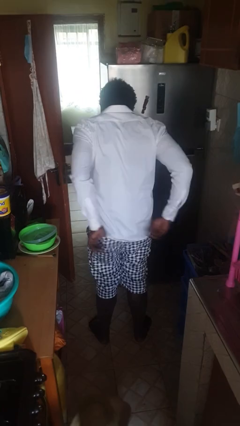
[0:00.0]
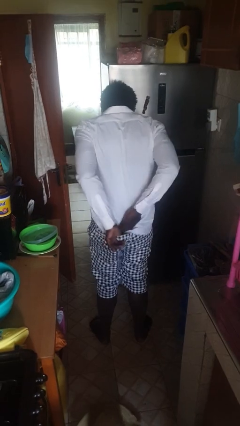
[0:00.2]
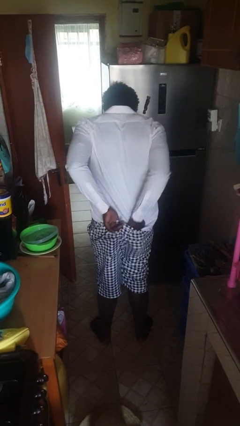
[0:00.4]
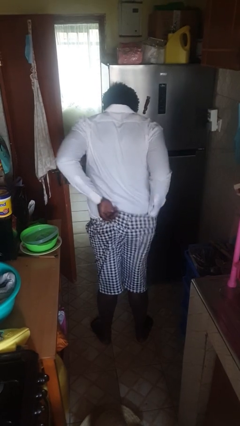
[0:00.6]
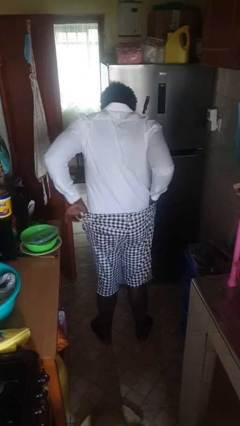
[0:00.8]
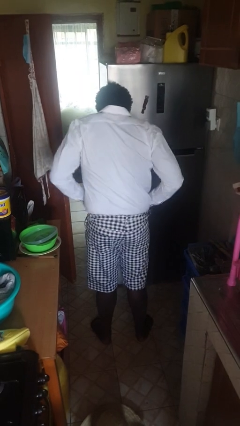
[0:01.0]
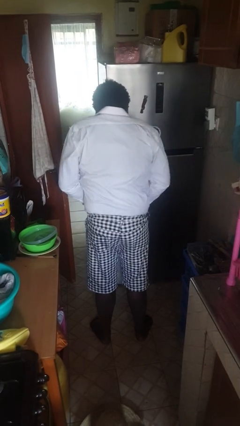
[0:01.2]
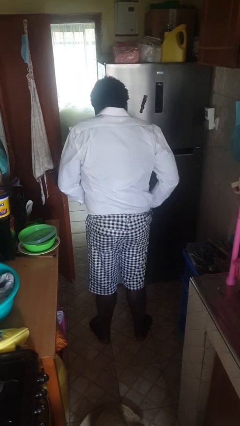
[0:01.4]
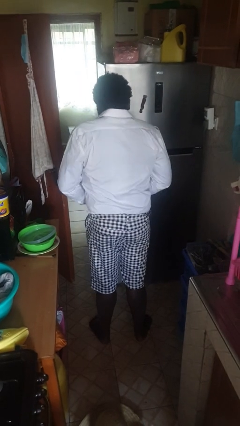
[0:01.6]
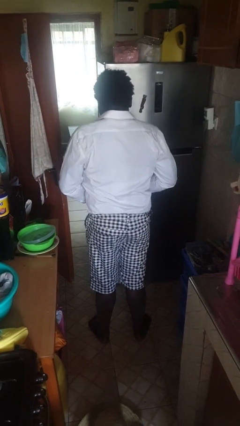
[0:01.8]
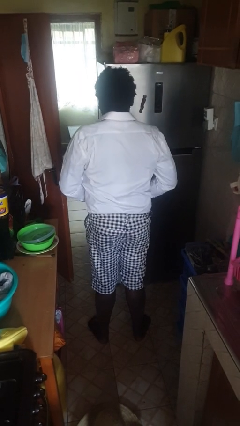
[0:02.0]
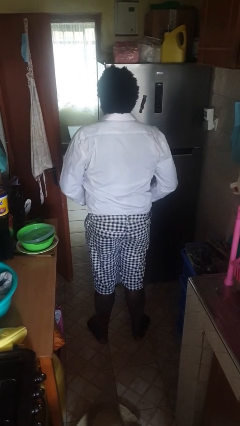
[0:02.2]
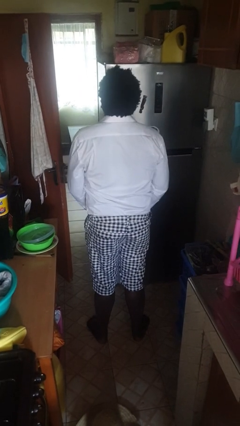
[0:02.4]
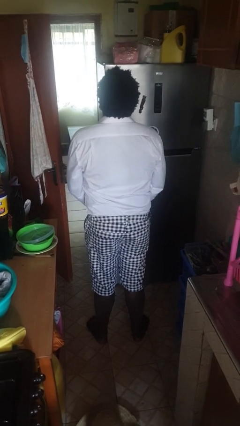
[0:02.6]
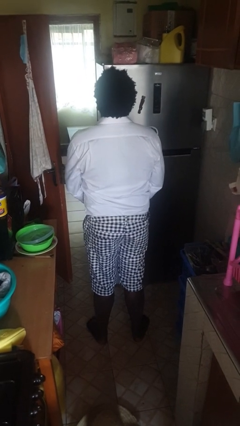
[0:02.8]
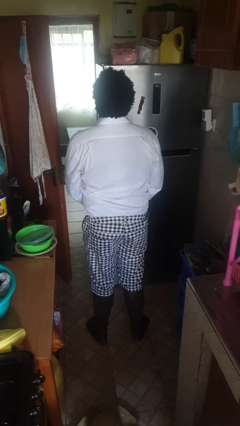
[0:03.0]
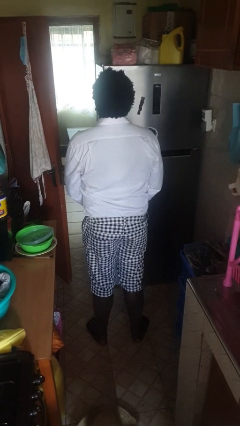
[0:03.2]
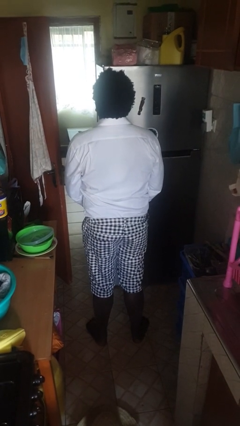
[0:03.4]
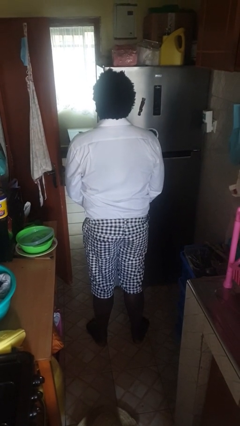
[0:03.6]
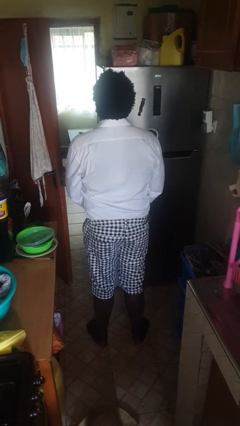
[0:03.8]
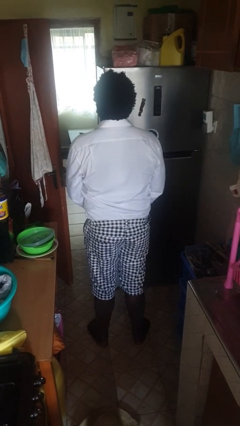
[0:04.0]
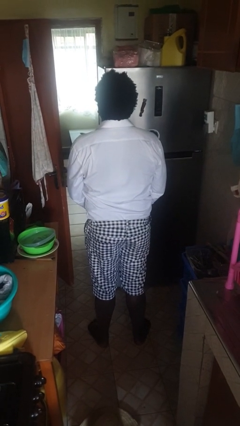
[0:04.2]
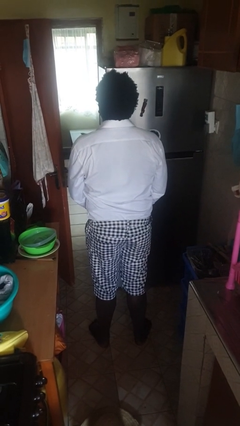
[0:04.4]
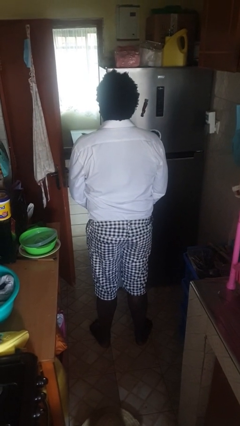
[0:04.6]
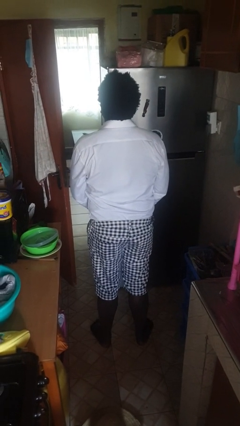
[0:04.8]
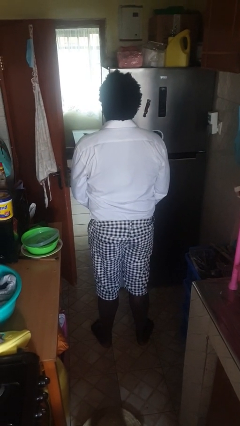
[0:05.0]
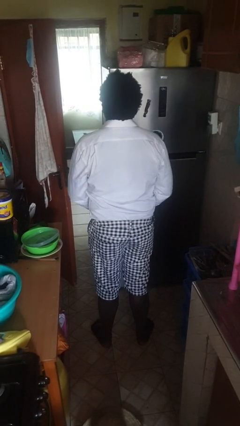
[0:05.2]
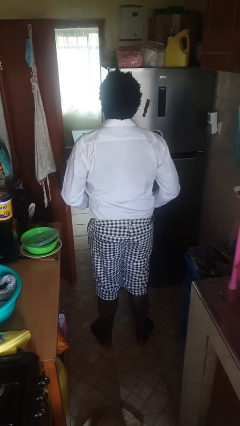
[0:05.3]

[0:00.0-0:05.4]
person tucks in shirt

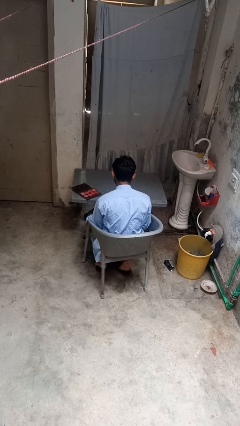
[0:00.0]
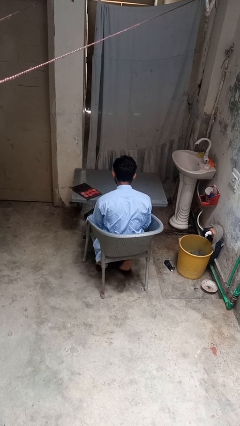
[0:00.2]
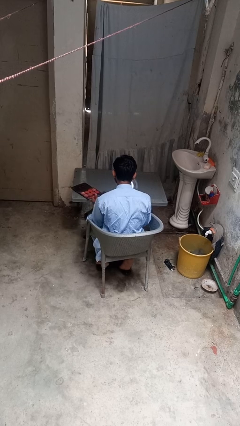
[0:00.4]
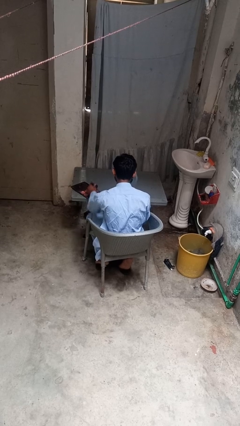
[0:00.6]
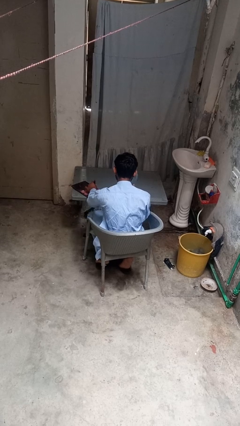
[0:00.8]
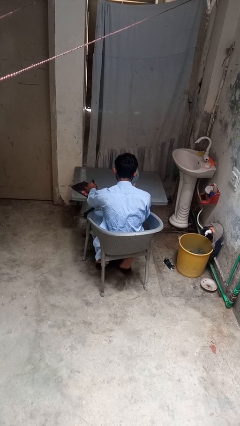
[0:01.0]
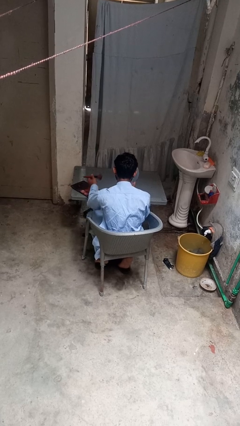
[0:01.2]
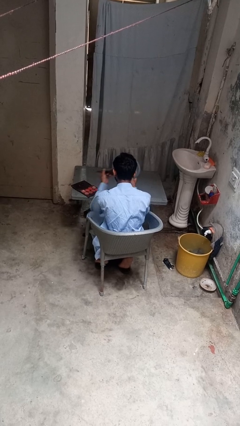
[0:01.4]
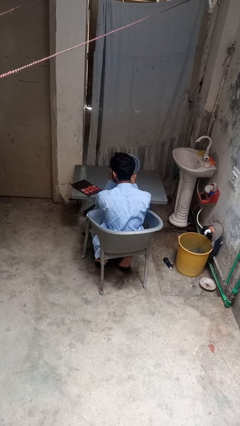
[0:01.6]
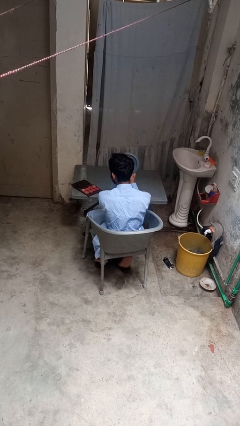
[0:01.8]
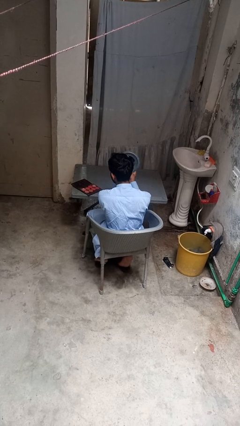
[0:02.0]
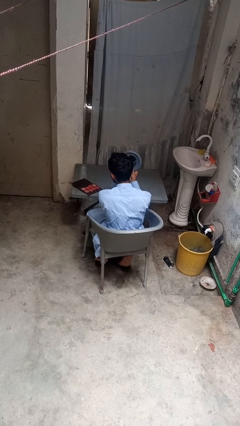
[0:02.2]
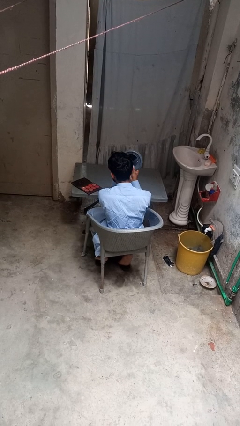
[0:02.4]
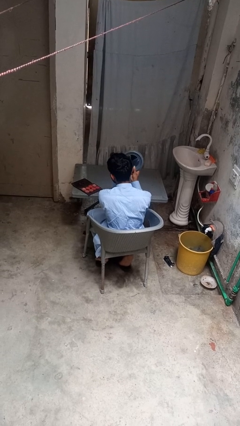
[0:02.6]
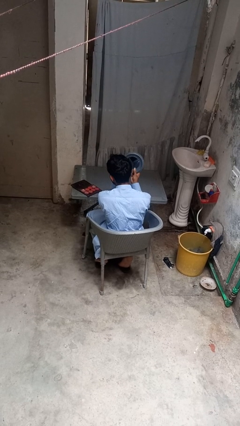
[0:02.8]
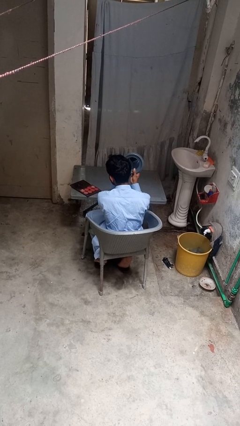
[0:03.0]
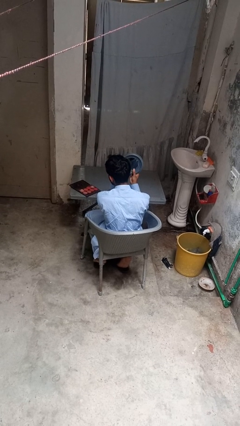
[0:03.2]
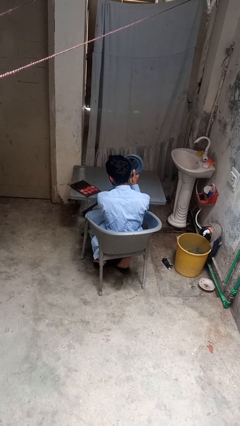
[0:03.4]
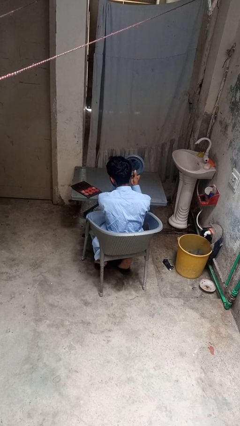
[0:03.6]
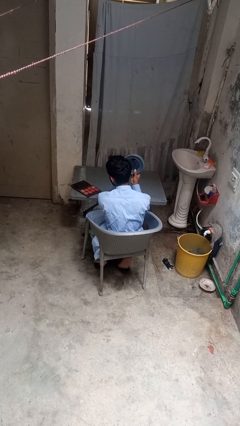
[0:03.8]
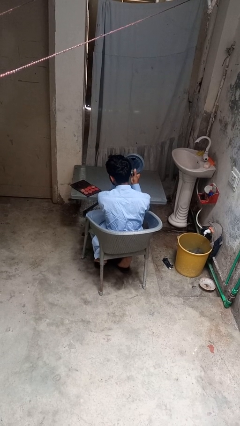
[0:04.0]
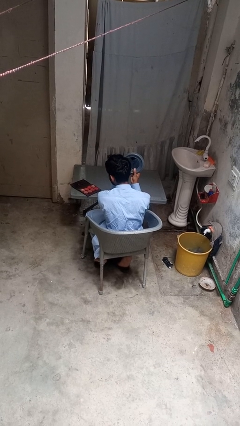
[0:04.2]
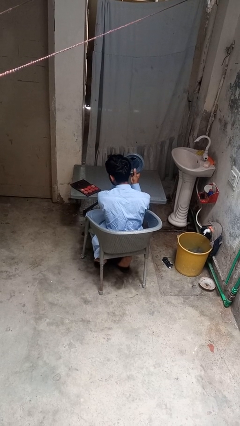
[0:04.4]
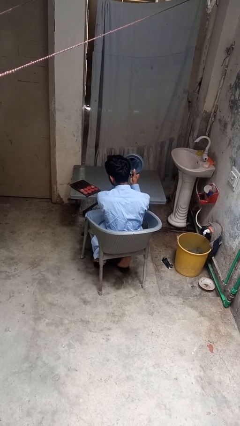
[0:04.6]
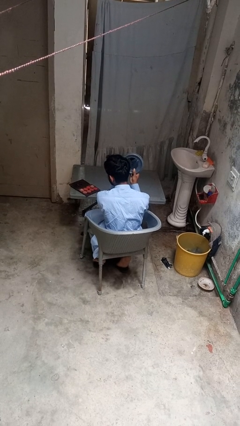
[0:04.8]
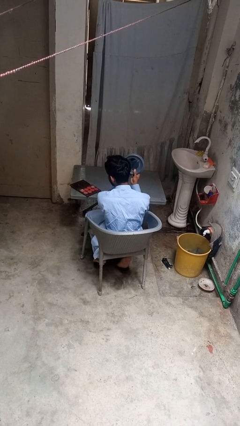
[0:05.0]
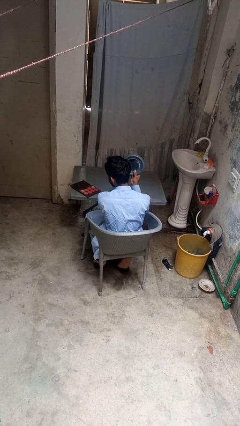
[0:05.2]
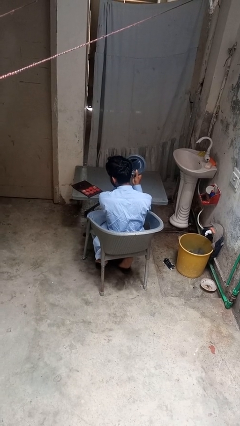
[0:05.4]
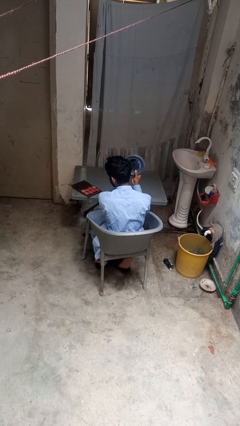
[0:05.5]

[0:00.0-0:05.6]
person applies eye makeup

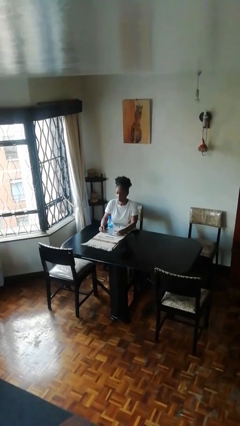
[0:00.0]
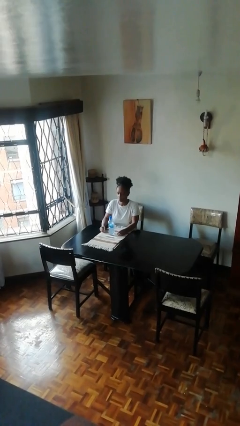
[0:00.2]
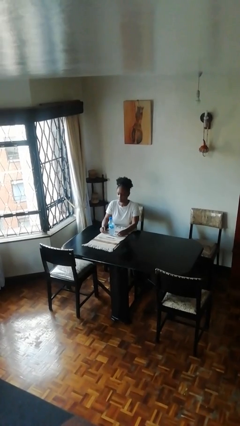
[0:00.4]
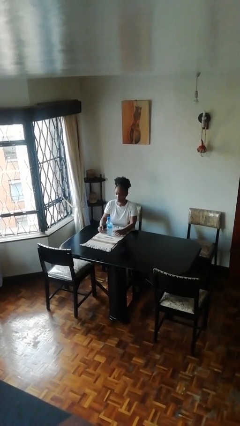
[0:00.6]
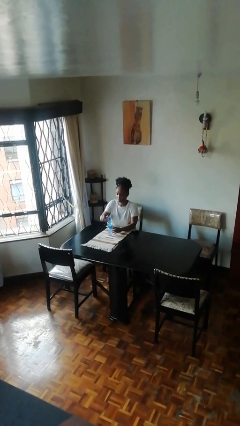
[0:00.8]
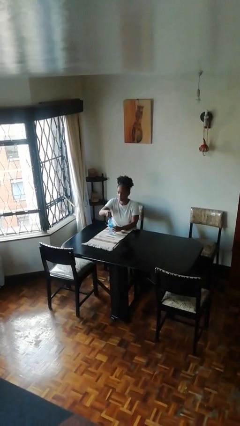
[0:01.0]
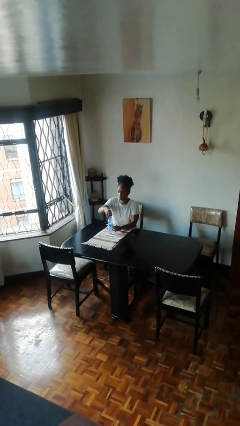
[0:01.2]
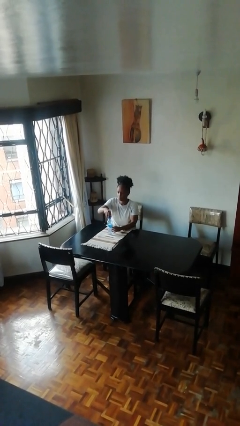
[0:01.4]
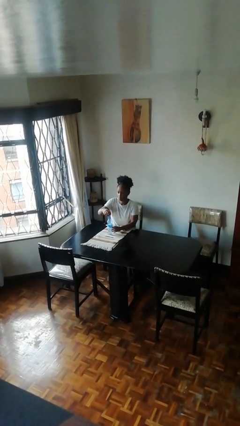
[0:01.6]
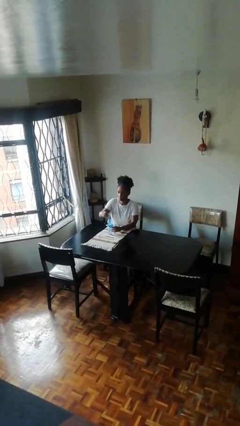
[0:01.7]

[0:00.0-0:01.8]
person unscrews lid from bottle

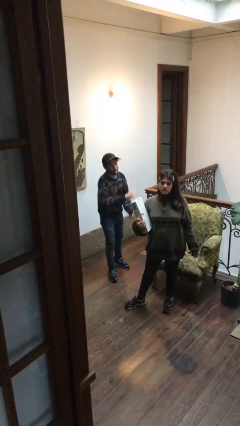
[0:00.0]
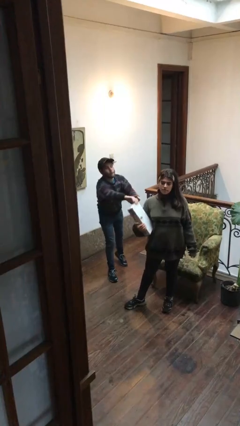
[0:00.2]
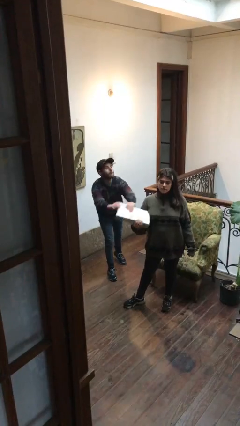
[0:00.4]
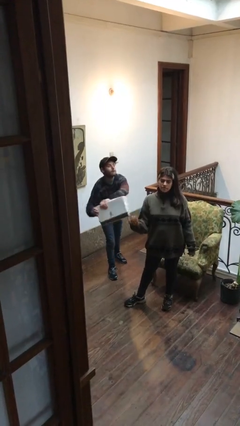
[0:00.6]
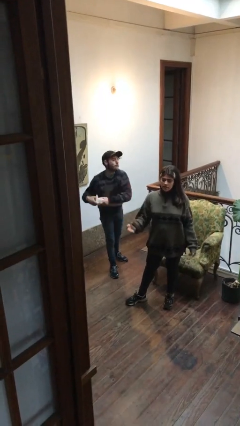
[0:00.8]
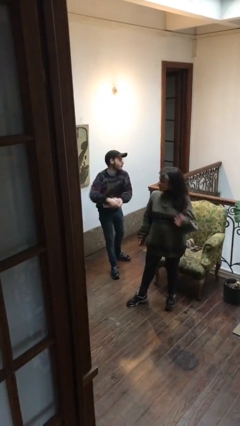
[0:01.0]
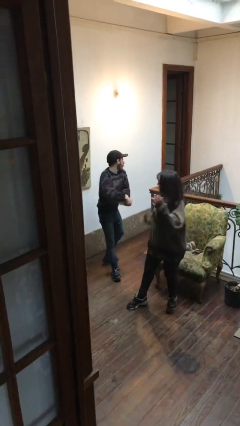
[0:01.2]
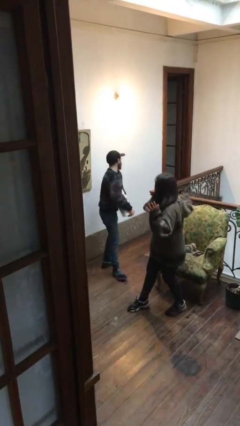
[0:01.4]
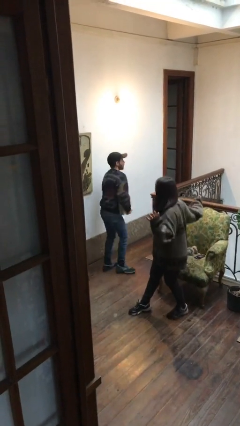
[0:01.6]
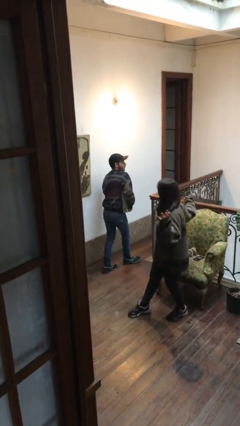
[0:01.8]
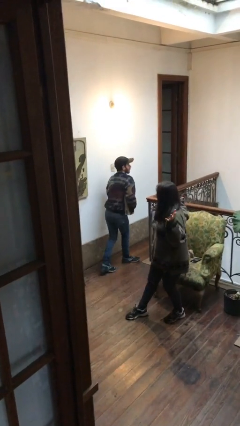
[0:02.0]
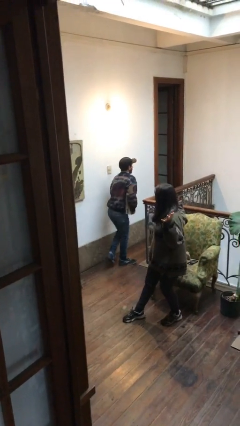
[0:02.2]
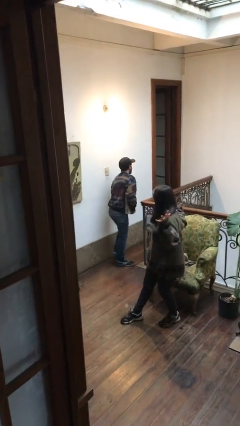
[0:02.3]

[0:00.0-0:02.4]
person steals object from person

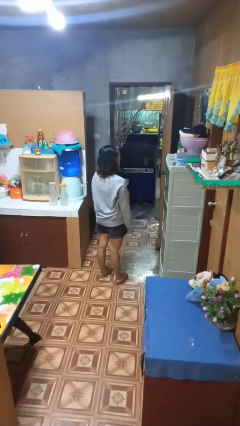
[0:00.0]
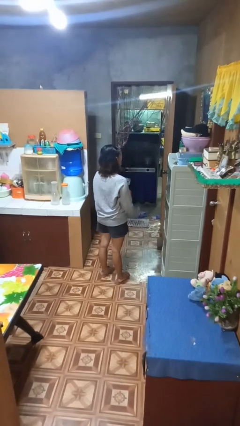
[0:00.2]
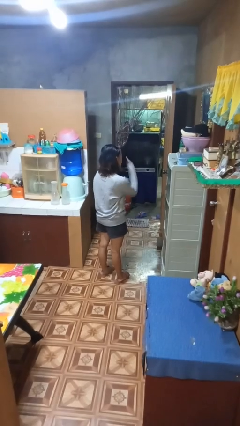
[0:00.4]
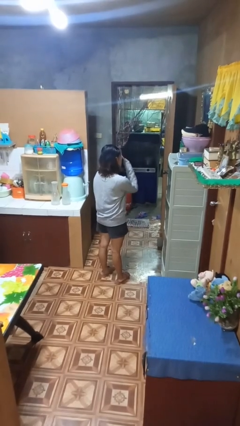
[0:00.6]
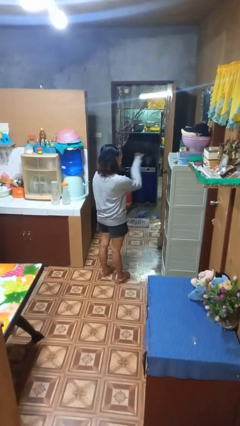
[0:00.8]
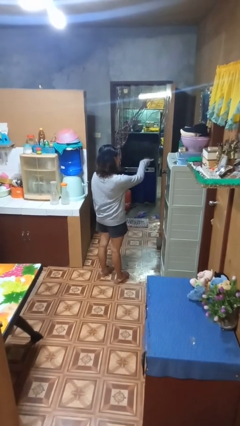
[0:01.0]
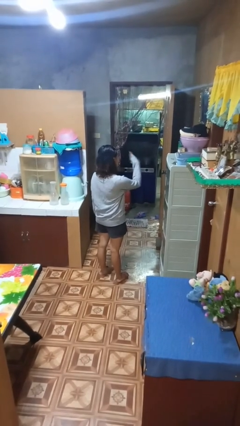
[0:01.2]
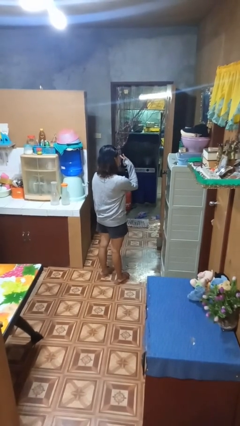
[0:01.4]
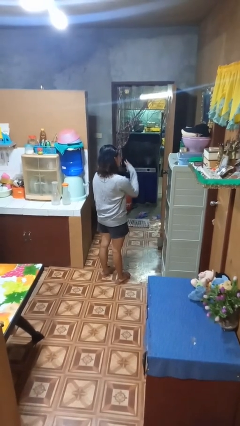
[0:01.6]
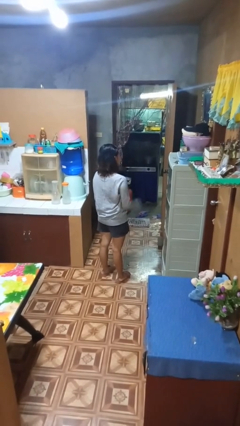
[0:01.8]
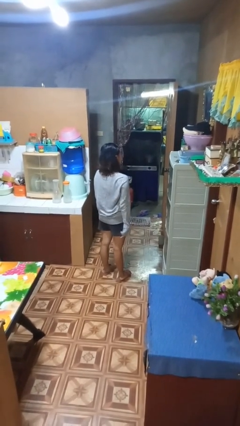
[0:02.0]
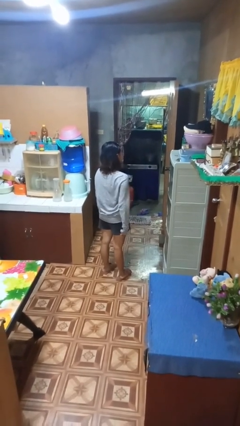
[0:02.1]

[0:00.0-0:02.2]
person gestures watch closely
